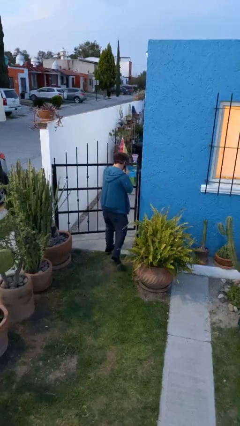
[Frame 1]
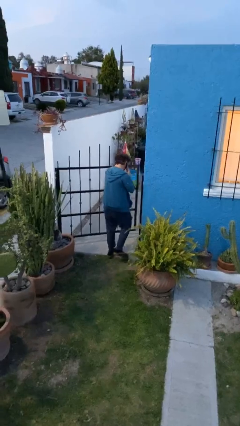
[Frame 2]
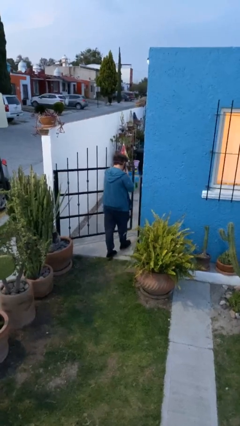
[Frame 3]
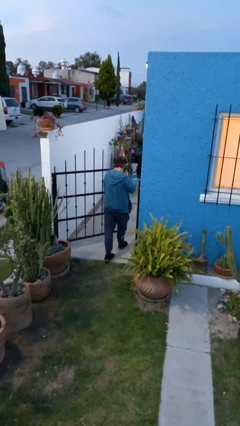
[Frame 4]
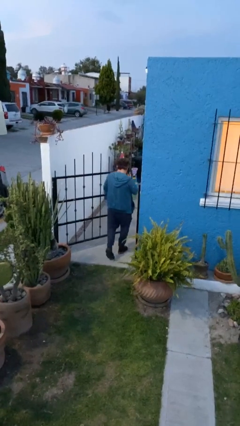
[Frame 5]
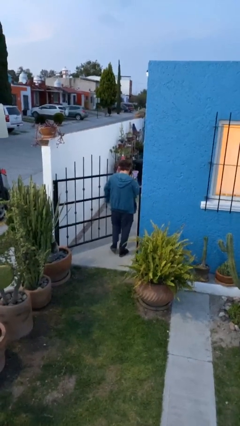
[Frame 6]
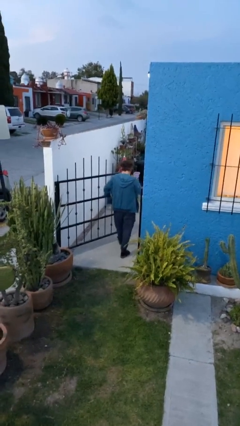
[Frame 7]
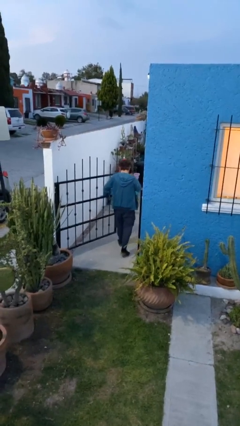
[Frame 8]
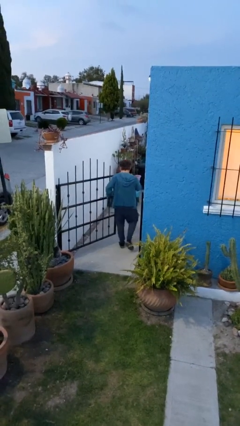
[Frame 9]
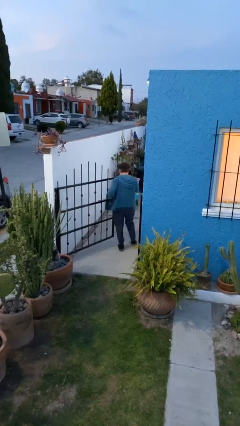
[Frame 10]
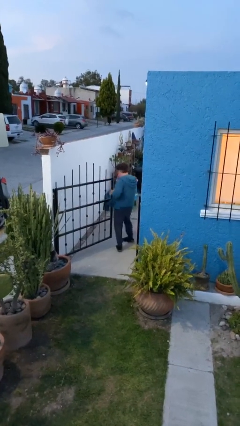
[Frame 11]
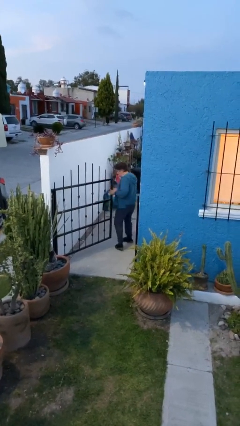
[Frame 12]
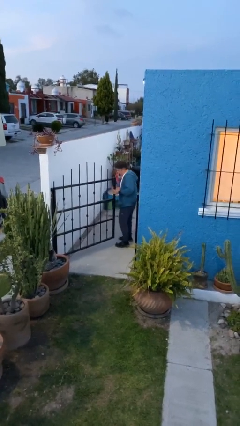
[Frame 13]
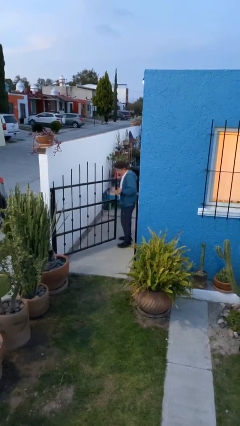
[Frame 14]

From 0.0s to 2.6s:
person exits scene through structure

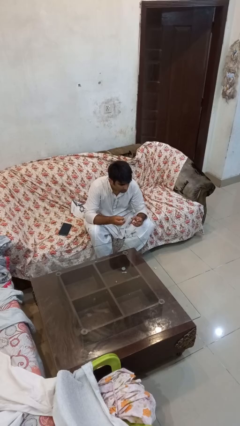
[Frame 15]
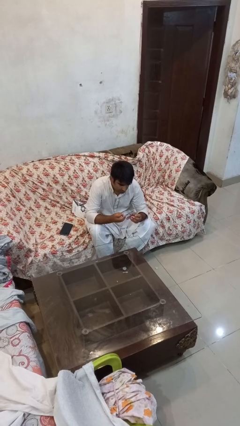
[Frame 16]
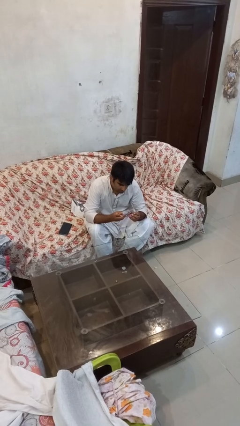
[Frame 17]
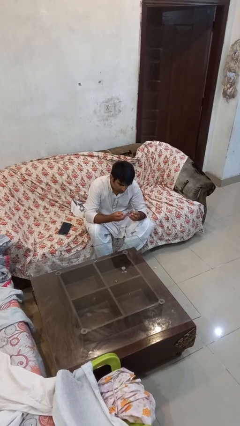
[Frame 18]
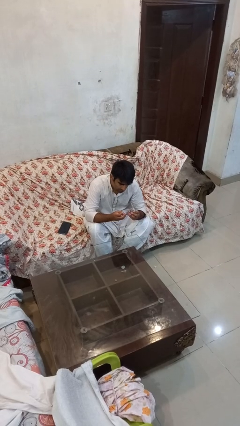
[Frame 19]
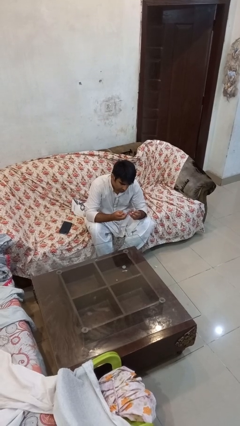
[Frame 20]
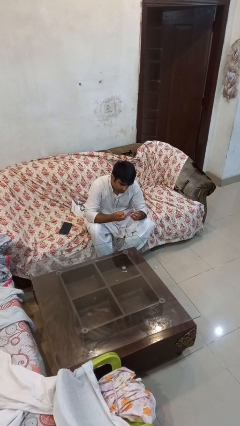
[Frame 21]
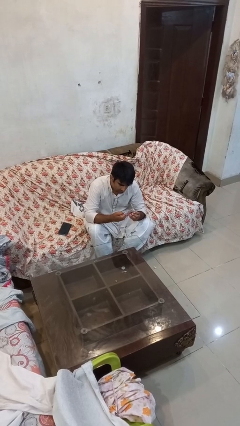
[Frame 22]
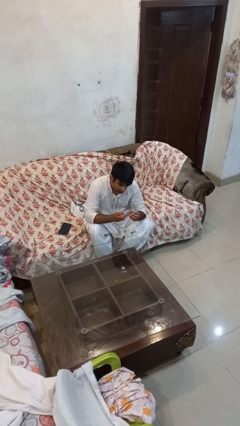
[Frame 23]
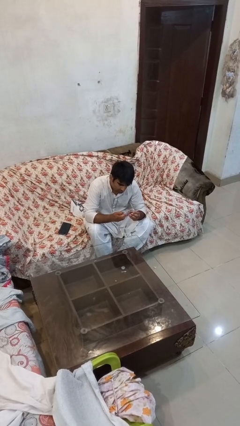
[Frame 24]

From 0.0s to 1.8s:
person clips fingernails

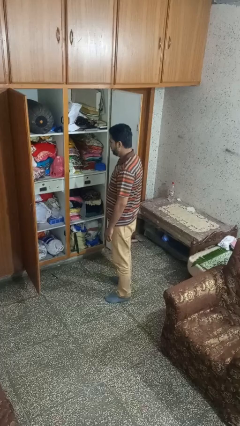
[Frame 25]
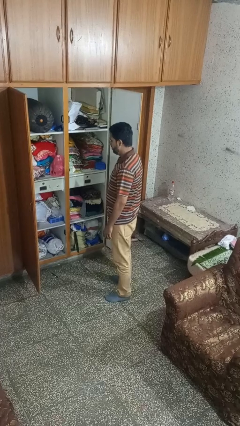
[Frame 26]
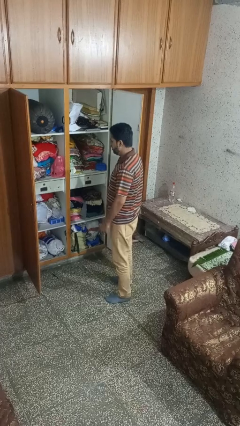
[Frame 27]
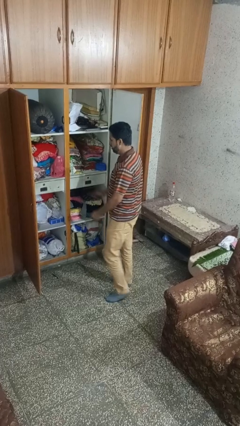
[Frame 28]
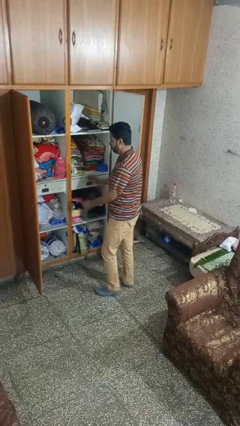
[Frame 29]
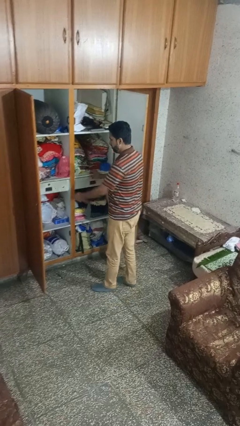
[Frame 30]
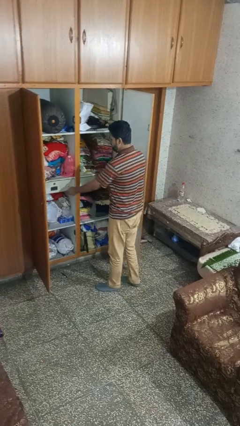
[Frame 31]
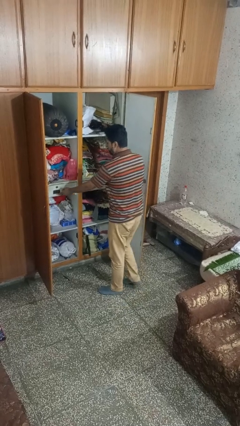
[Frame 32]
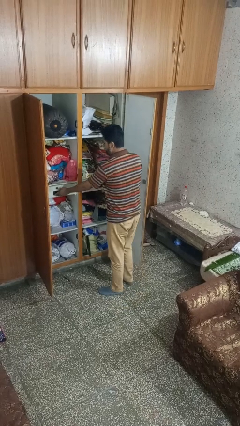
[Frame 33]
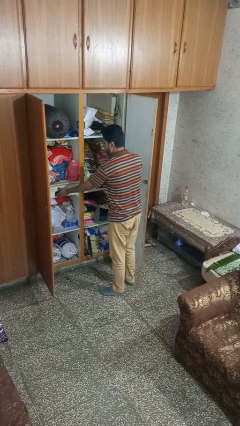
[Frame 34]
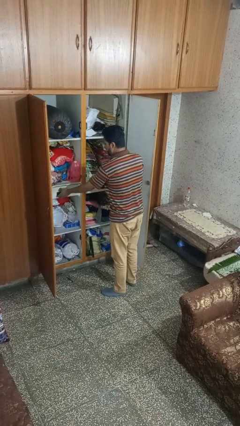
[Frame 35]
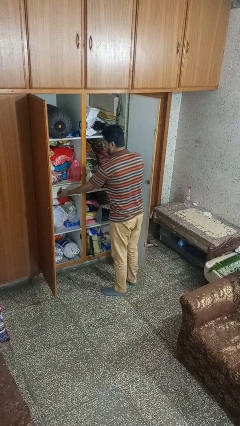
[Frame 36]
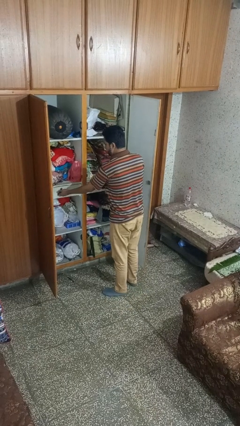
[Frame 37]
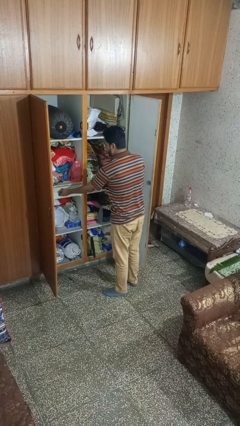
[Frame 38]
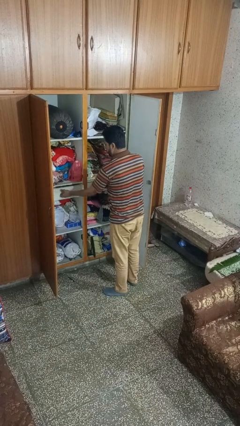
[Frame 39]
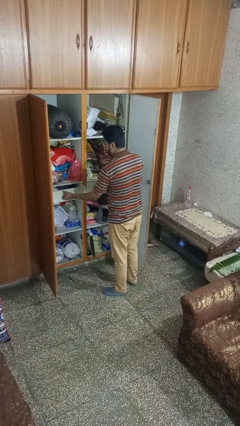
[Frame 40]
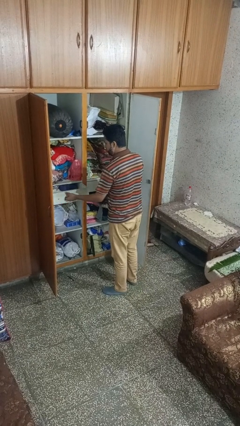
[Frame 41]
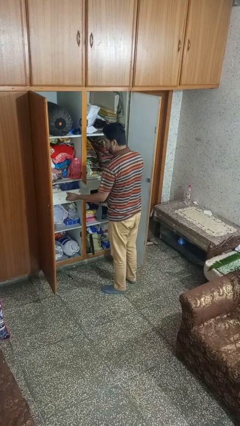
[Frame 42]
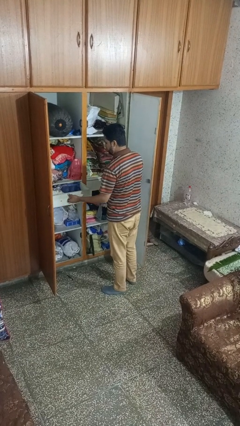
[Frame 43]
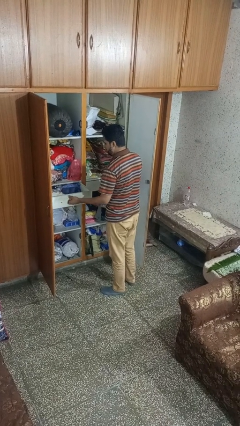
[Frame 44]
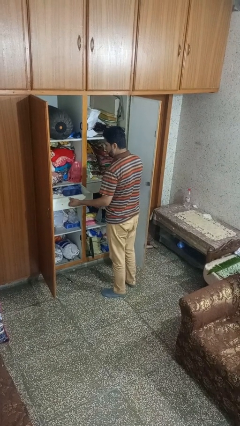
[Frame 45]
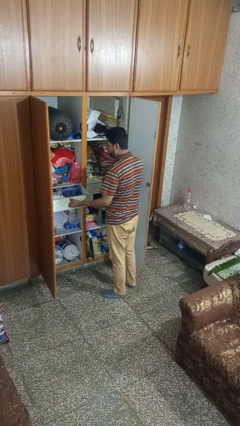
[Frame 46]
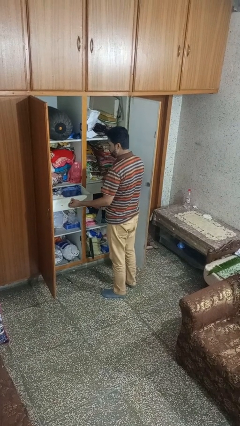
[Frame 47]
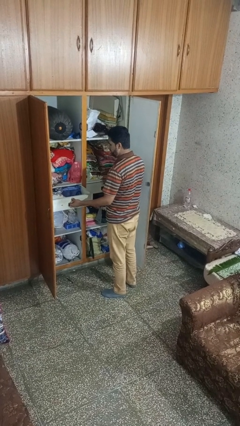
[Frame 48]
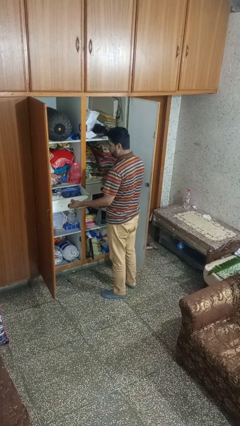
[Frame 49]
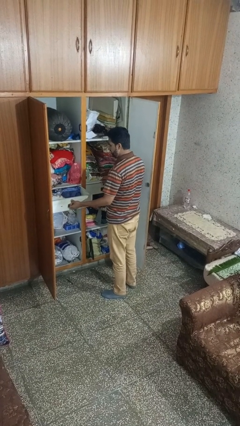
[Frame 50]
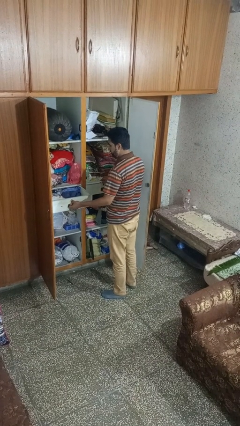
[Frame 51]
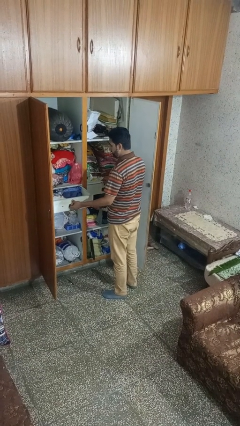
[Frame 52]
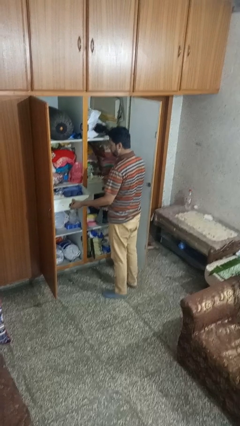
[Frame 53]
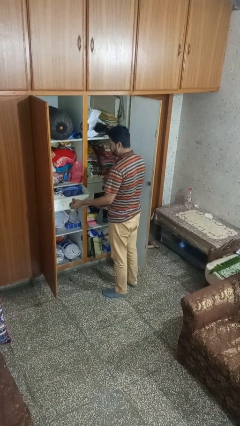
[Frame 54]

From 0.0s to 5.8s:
person opens dresser drawer

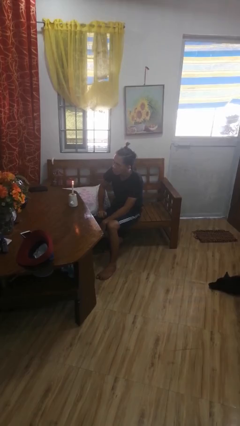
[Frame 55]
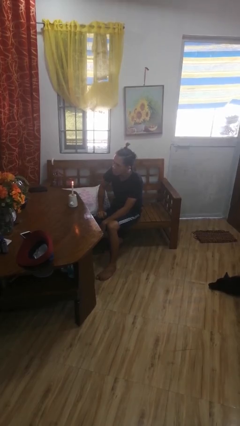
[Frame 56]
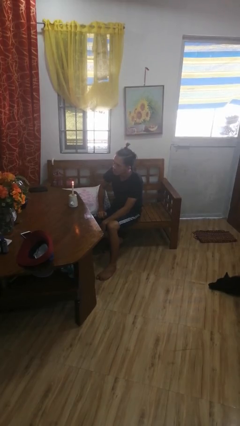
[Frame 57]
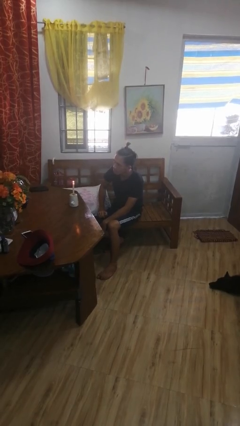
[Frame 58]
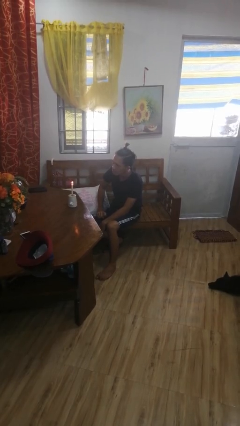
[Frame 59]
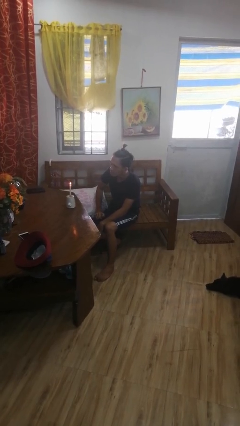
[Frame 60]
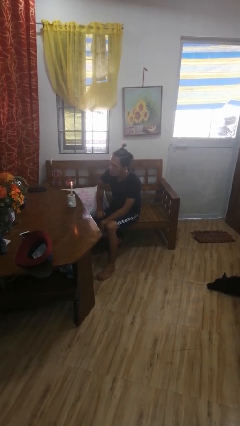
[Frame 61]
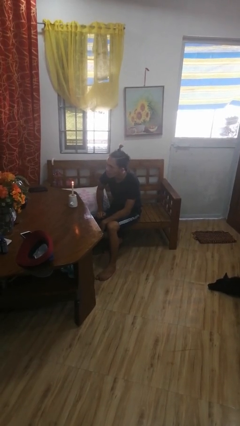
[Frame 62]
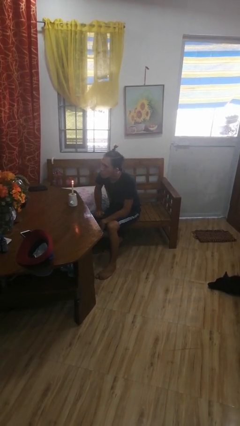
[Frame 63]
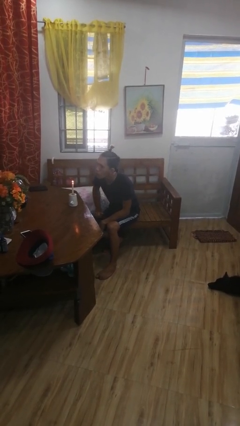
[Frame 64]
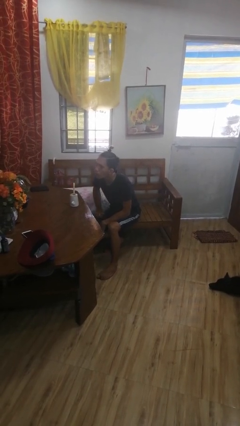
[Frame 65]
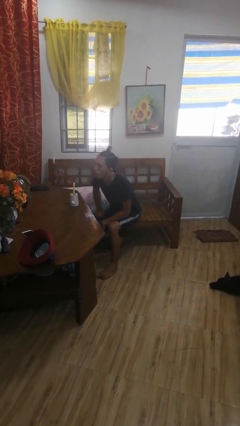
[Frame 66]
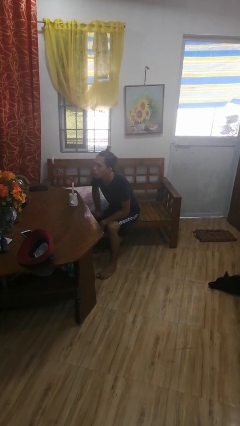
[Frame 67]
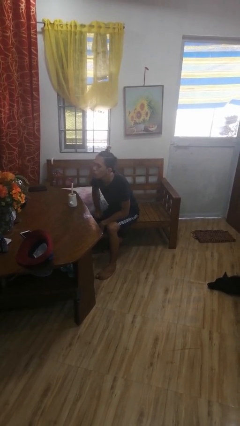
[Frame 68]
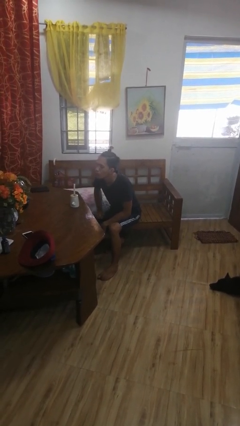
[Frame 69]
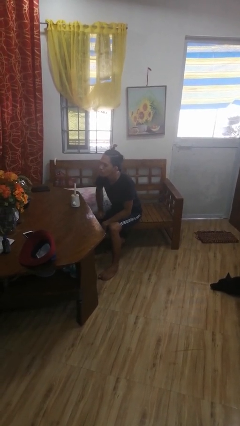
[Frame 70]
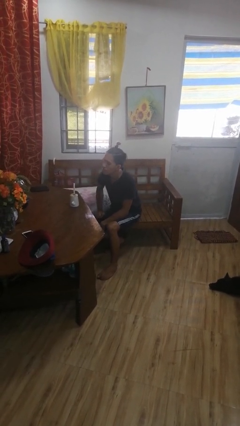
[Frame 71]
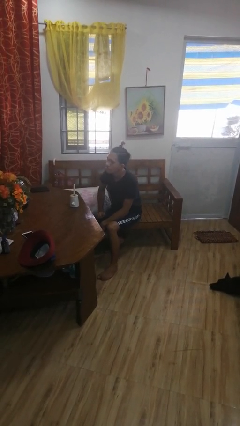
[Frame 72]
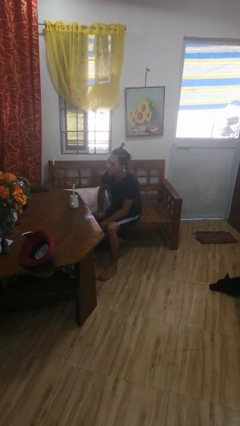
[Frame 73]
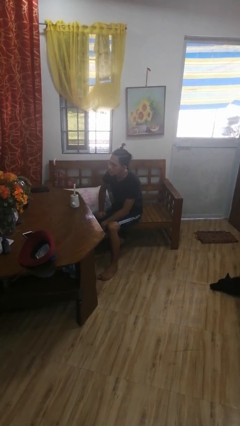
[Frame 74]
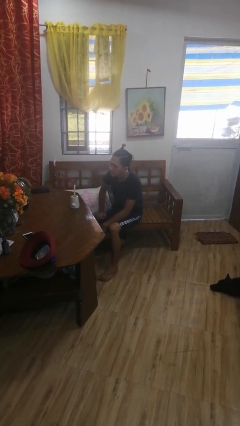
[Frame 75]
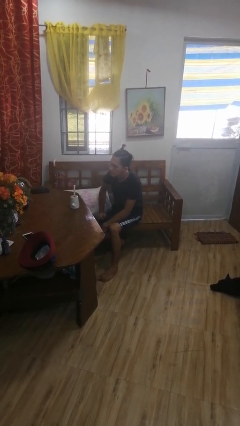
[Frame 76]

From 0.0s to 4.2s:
person extinguishes candle

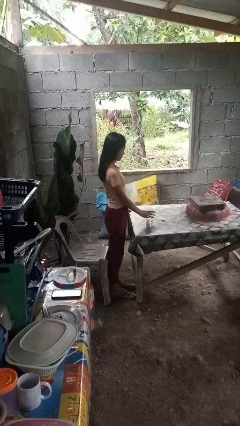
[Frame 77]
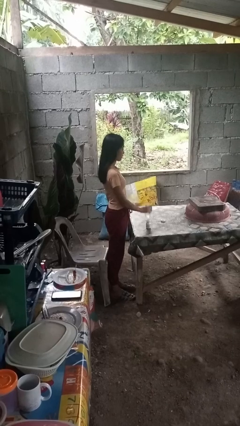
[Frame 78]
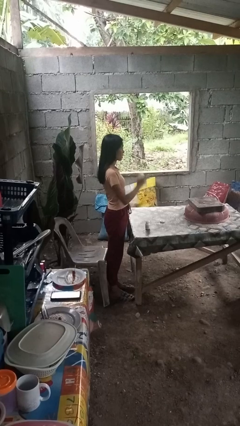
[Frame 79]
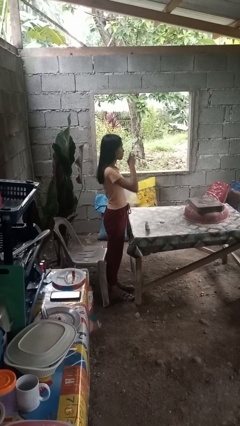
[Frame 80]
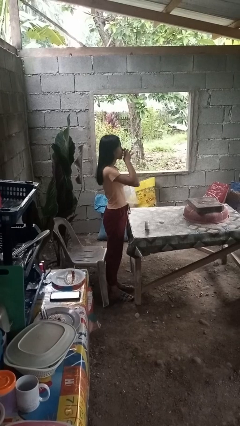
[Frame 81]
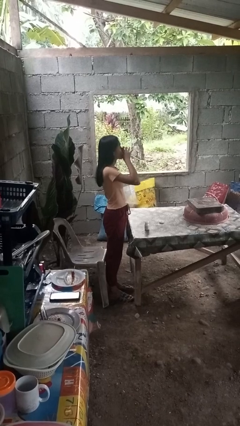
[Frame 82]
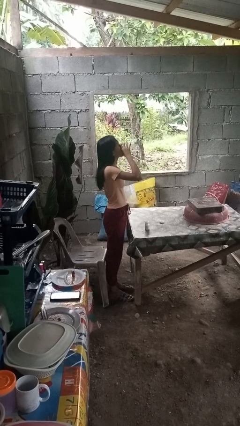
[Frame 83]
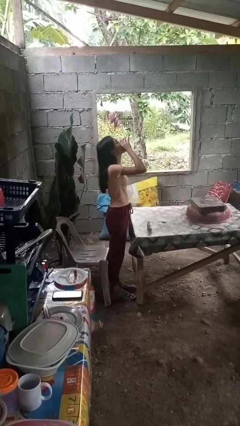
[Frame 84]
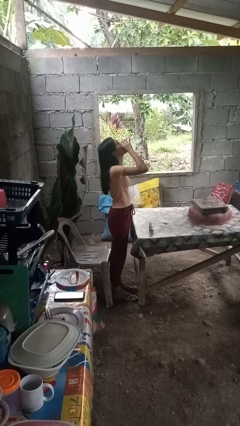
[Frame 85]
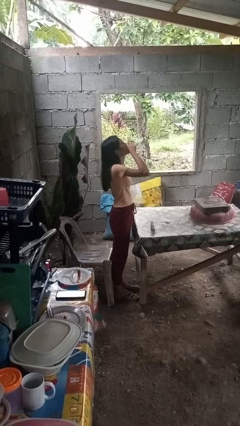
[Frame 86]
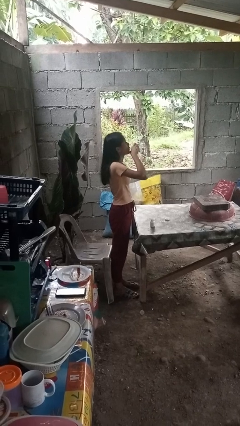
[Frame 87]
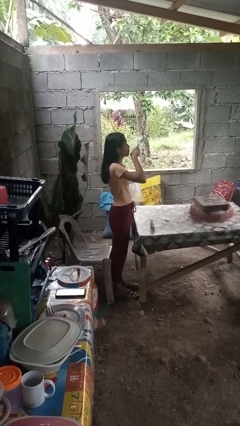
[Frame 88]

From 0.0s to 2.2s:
person drinks from cup

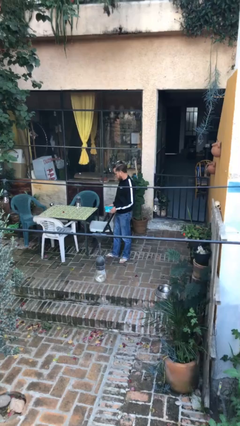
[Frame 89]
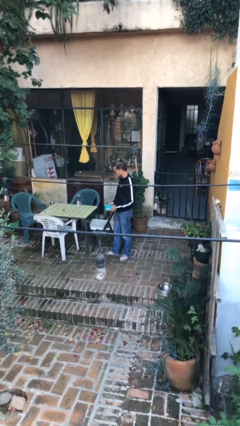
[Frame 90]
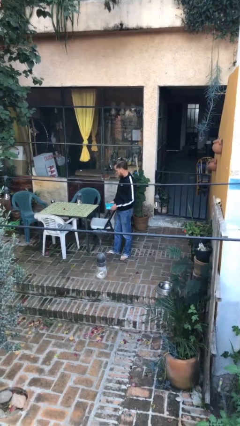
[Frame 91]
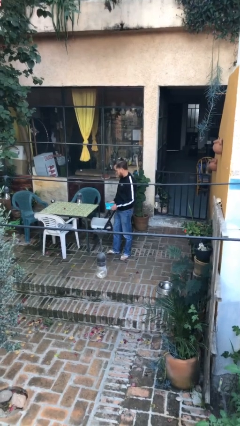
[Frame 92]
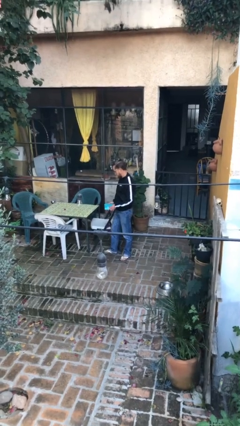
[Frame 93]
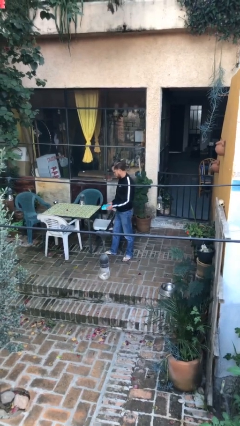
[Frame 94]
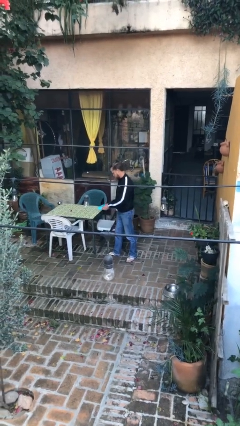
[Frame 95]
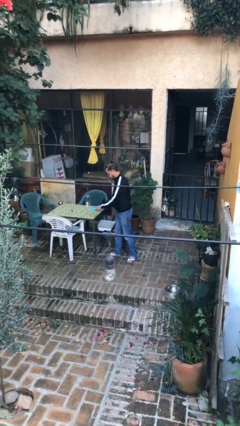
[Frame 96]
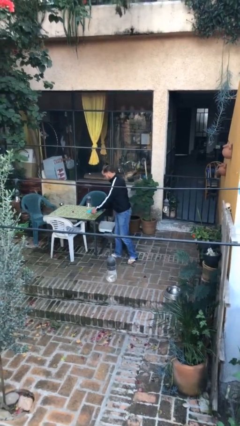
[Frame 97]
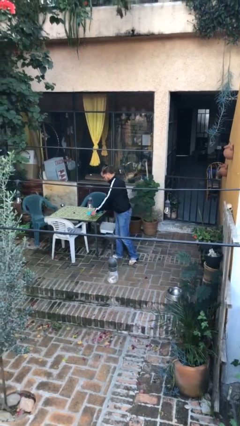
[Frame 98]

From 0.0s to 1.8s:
person puts down object on table
